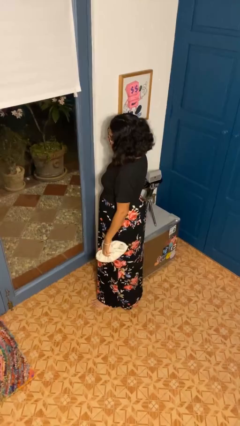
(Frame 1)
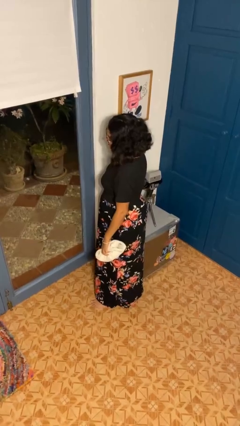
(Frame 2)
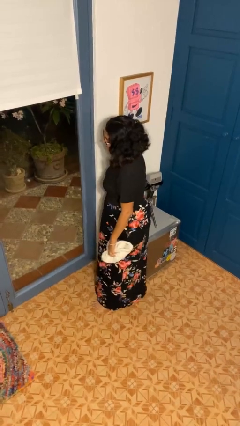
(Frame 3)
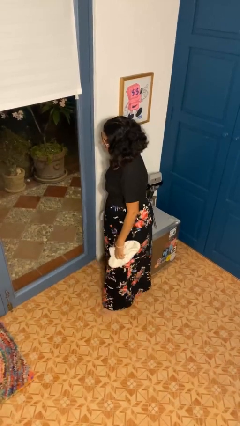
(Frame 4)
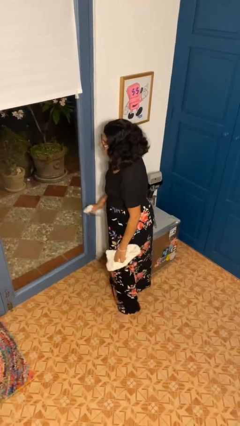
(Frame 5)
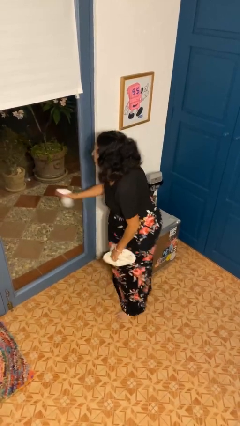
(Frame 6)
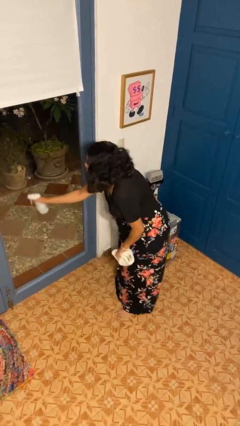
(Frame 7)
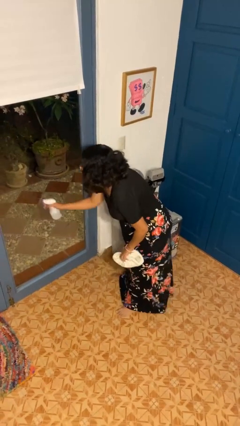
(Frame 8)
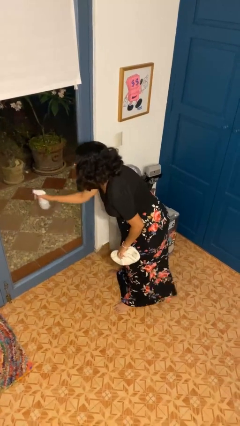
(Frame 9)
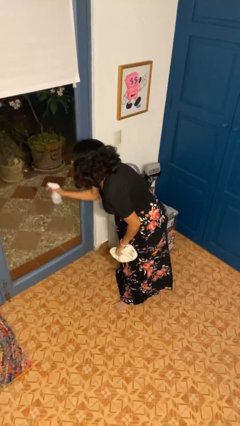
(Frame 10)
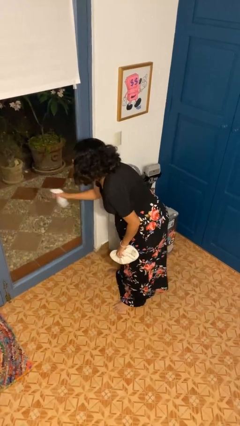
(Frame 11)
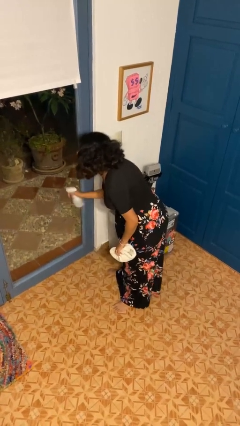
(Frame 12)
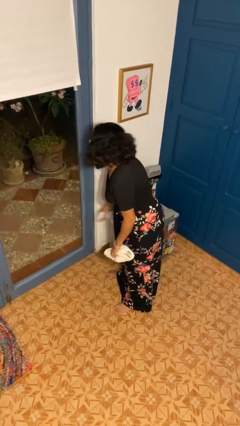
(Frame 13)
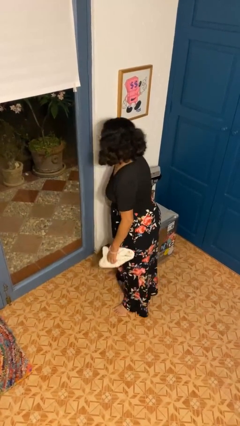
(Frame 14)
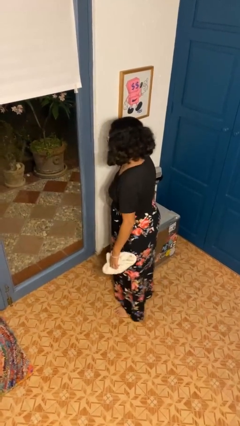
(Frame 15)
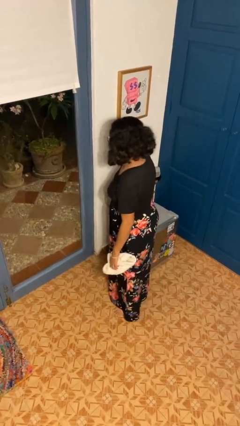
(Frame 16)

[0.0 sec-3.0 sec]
person sprays from bottle

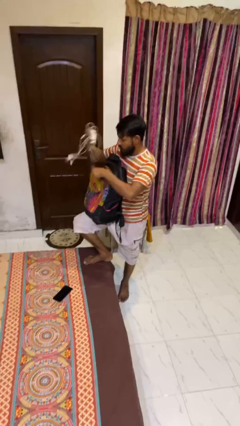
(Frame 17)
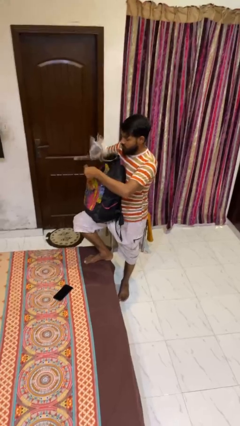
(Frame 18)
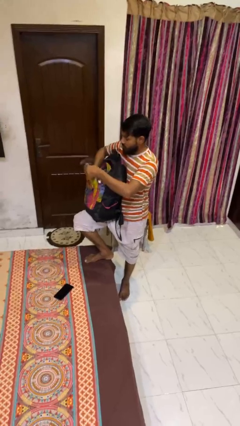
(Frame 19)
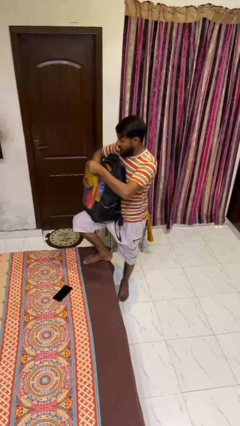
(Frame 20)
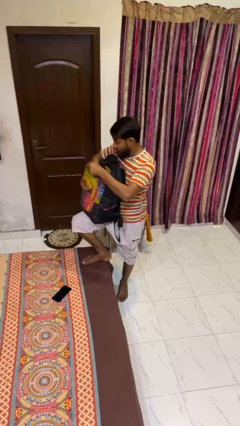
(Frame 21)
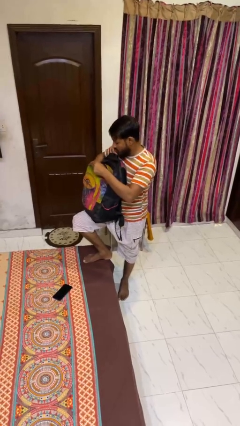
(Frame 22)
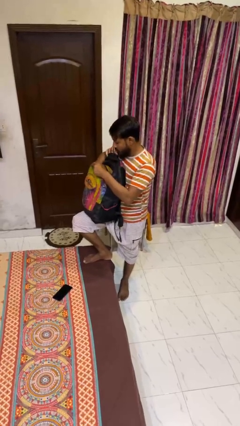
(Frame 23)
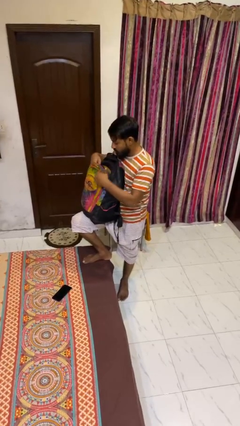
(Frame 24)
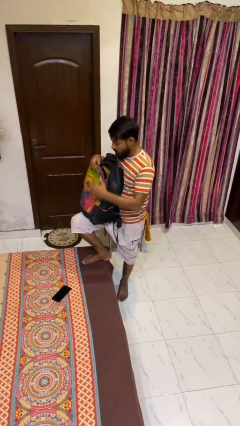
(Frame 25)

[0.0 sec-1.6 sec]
person puts object into backpack

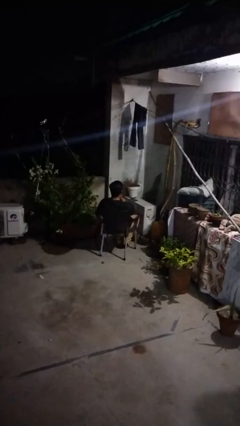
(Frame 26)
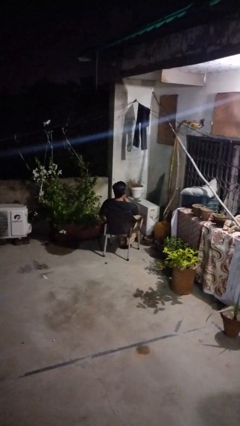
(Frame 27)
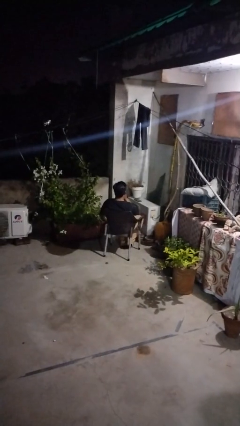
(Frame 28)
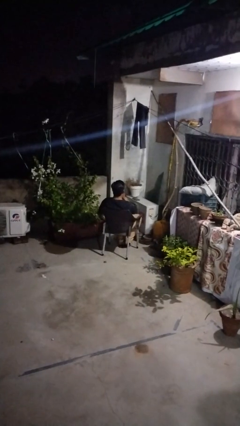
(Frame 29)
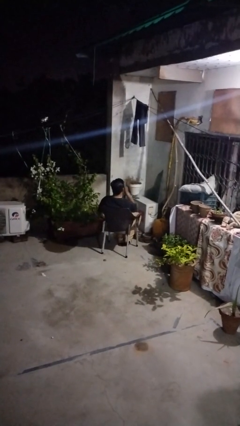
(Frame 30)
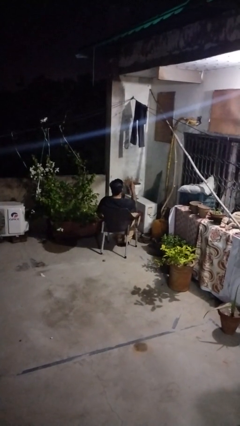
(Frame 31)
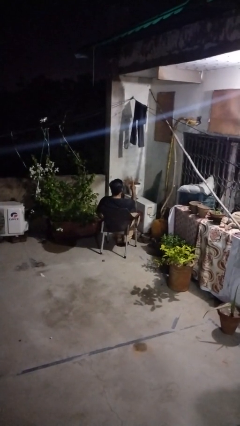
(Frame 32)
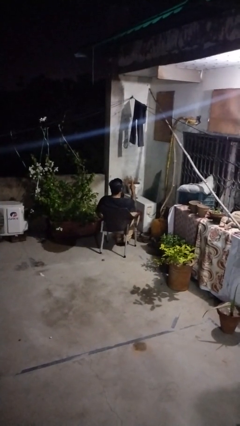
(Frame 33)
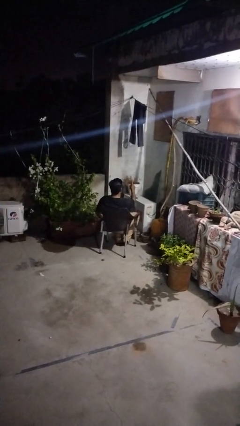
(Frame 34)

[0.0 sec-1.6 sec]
person gestures be quiet

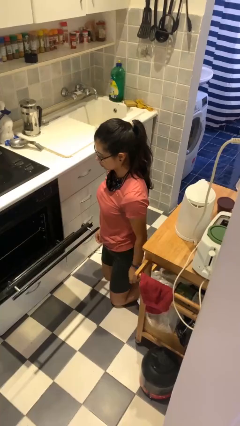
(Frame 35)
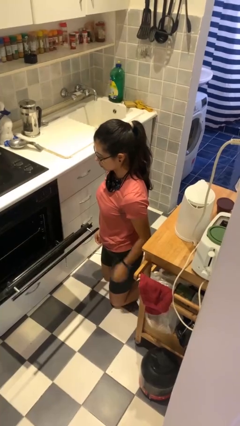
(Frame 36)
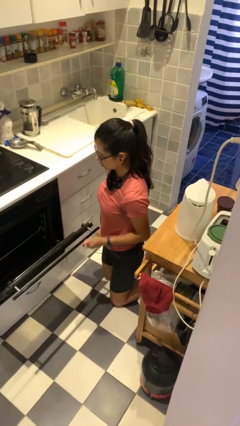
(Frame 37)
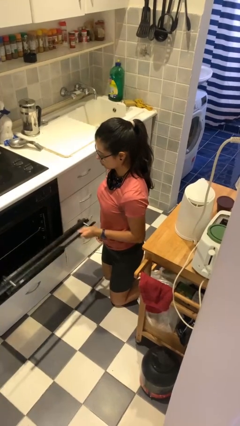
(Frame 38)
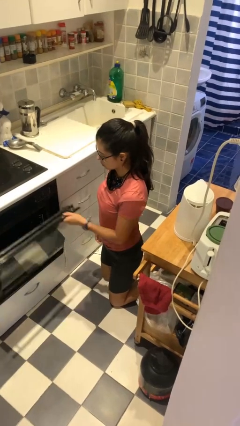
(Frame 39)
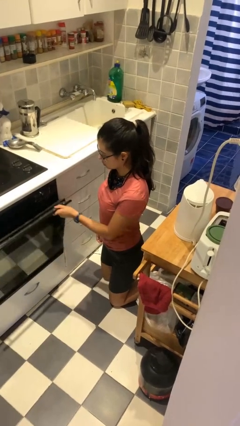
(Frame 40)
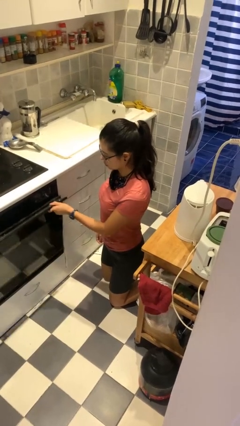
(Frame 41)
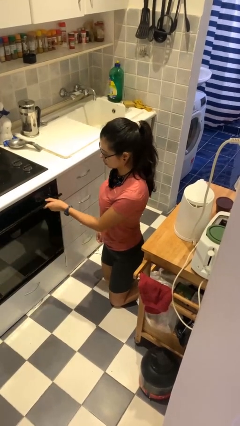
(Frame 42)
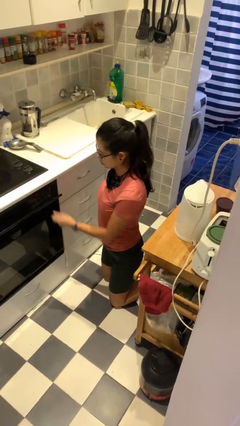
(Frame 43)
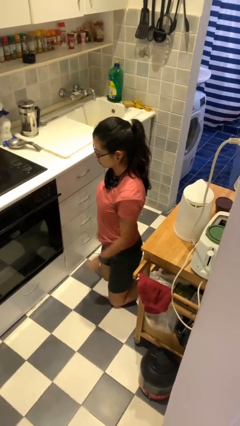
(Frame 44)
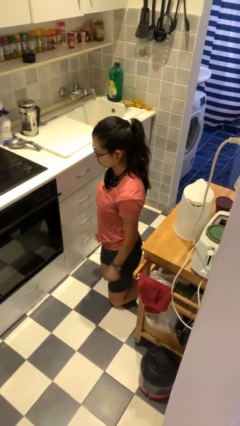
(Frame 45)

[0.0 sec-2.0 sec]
person closes oven door

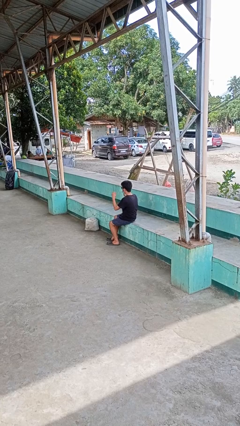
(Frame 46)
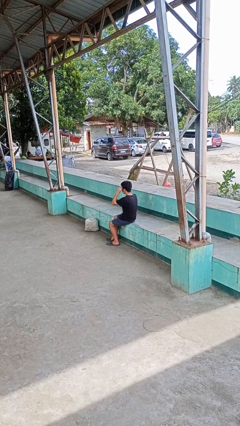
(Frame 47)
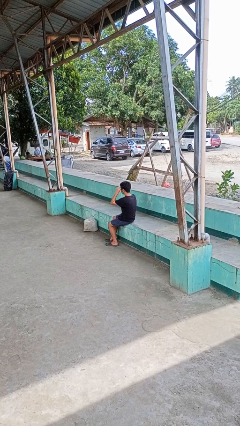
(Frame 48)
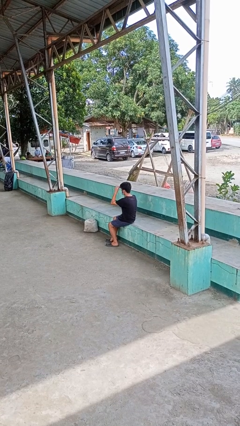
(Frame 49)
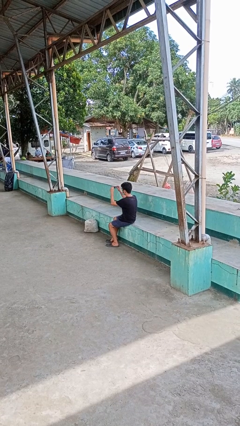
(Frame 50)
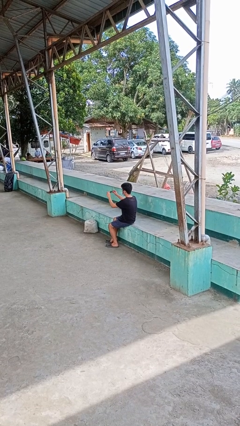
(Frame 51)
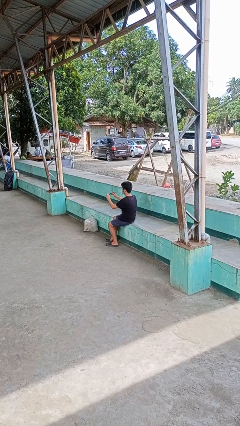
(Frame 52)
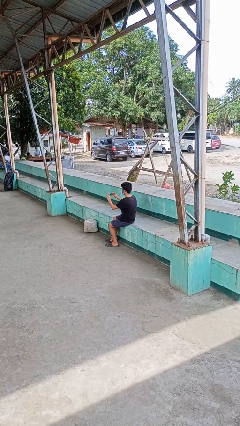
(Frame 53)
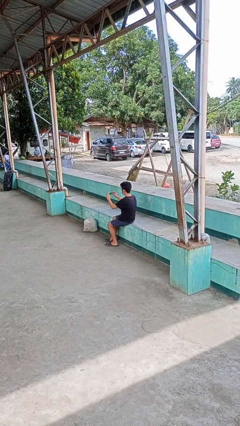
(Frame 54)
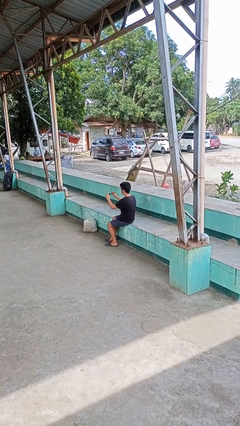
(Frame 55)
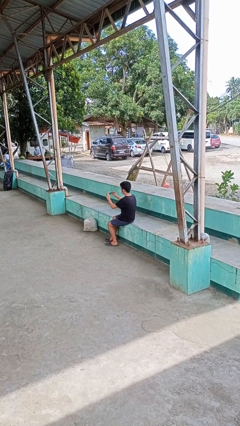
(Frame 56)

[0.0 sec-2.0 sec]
person takes off sunglasses

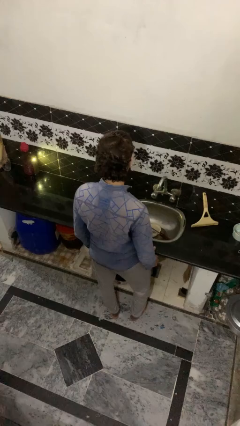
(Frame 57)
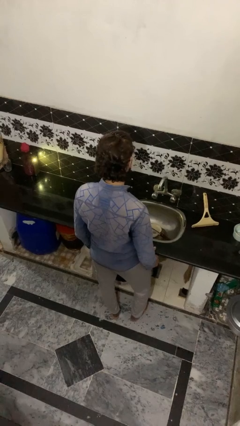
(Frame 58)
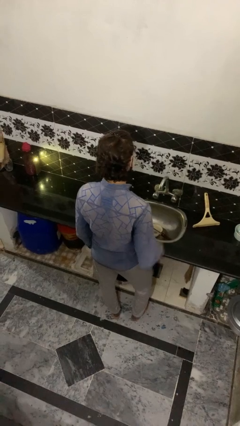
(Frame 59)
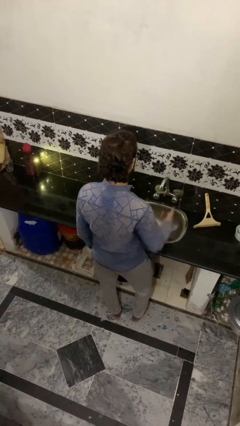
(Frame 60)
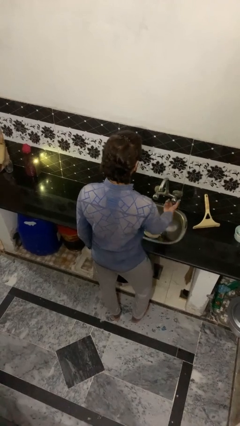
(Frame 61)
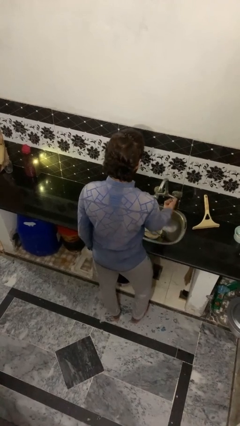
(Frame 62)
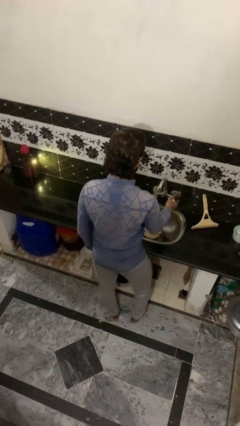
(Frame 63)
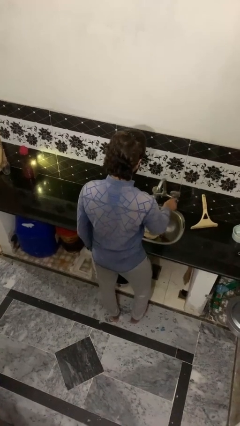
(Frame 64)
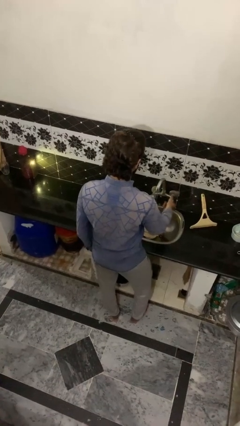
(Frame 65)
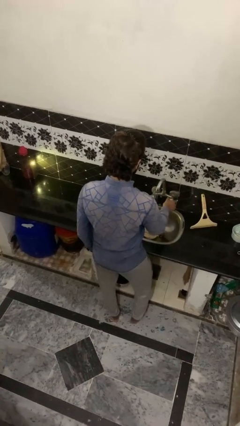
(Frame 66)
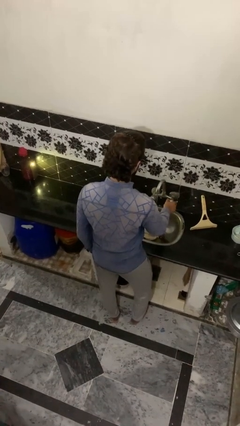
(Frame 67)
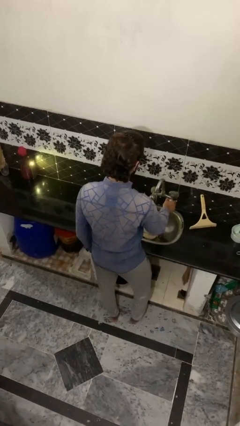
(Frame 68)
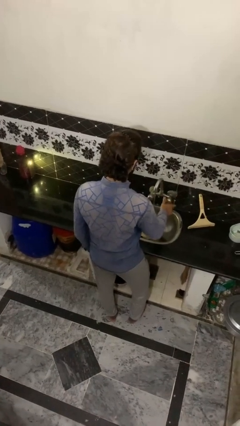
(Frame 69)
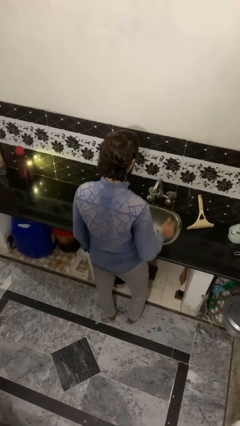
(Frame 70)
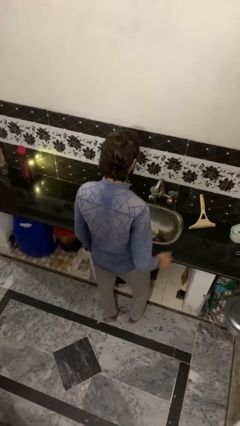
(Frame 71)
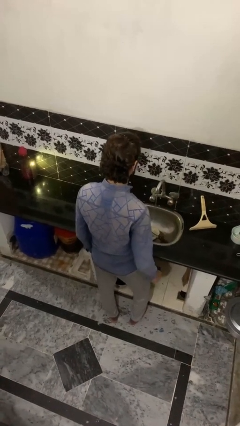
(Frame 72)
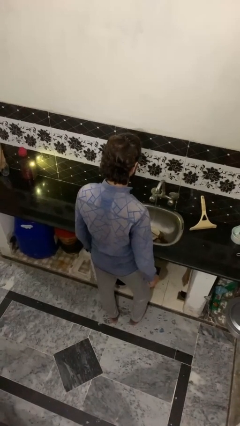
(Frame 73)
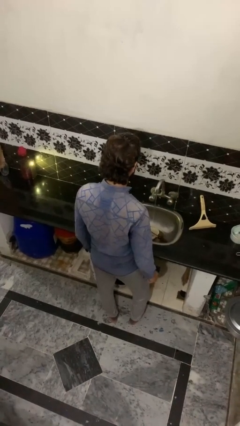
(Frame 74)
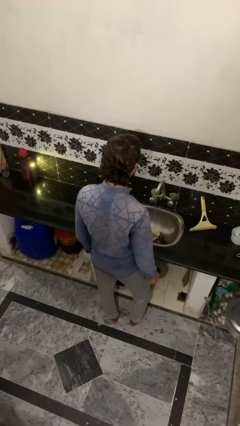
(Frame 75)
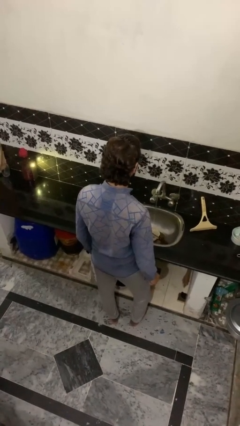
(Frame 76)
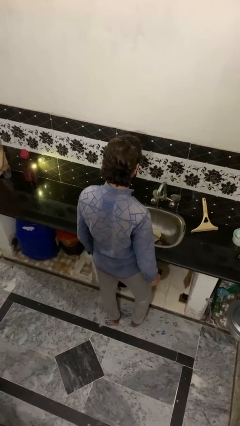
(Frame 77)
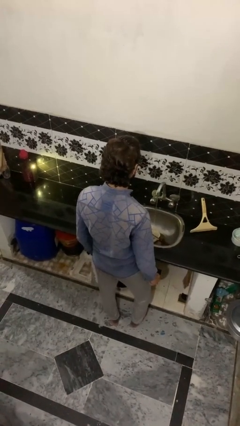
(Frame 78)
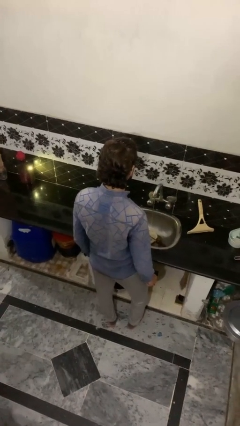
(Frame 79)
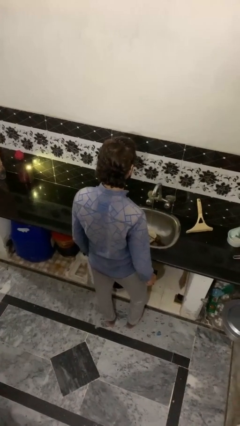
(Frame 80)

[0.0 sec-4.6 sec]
person turns on faucet

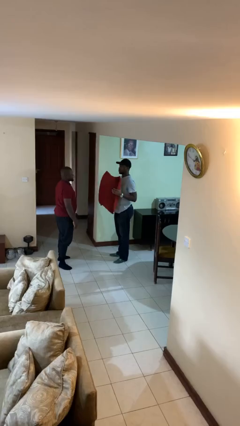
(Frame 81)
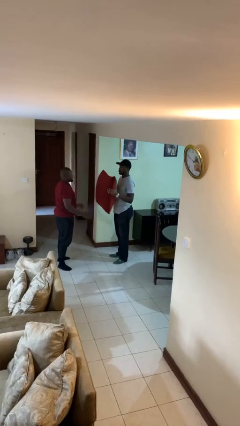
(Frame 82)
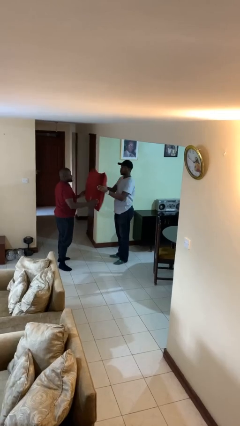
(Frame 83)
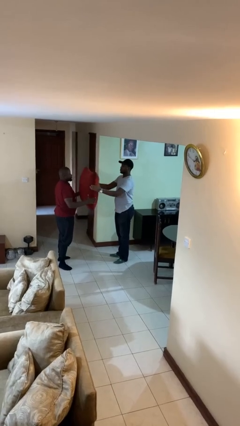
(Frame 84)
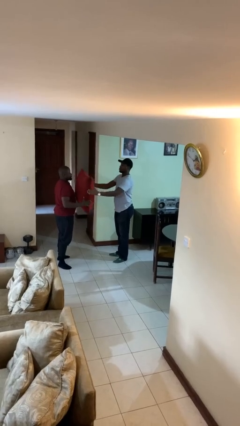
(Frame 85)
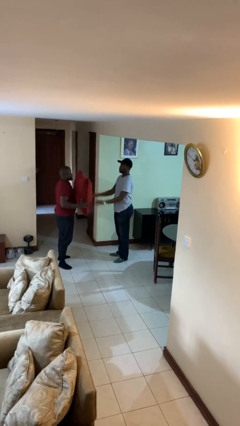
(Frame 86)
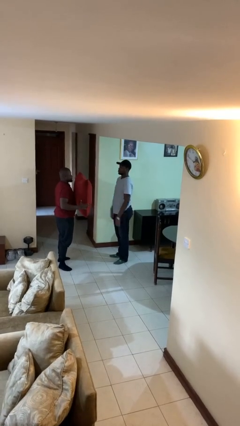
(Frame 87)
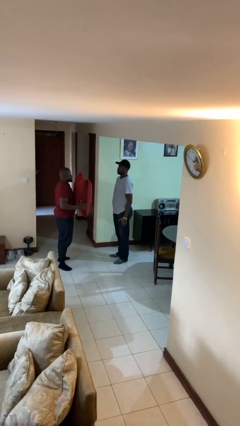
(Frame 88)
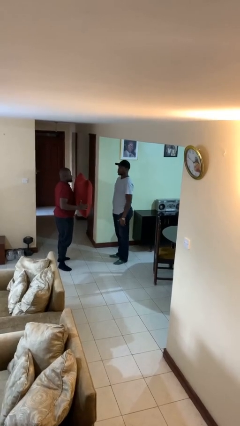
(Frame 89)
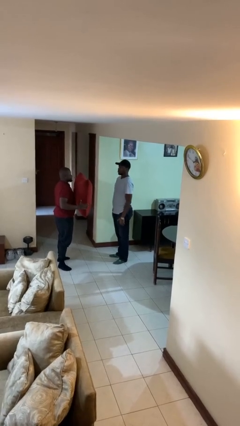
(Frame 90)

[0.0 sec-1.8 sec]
person transfers object to person

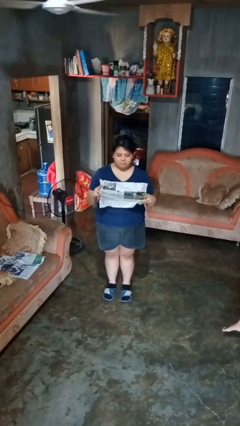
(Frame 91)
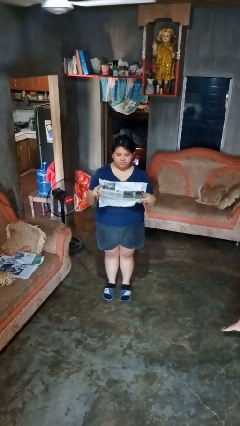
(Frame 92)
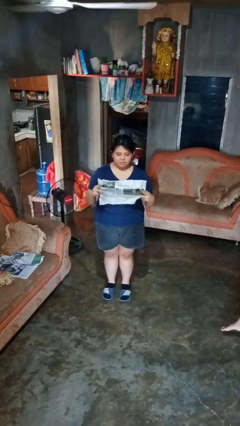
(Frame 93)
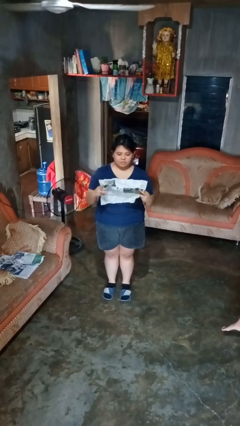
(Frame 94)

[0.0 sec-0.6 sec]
person crumples paper
